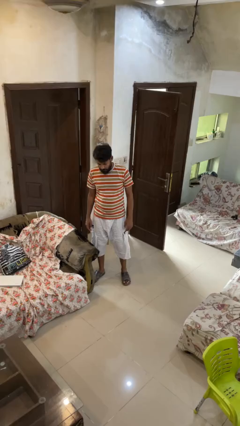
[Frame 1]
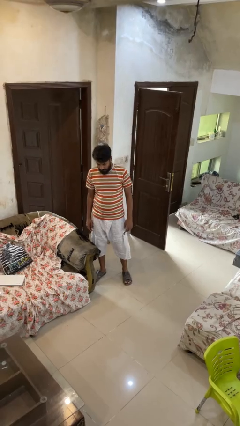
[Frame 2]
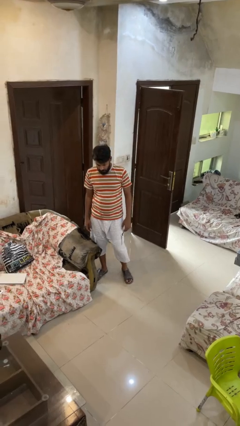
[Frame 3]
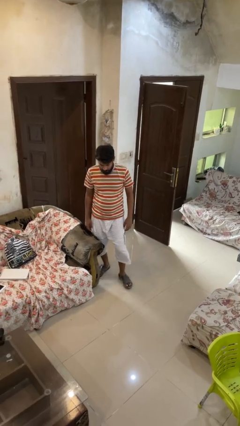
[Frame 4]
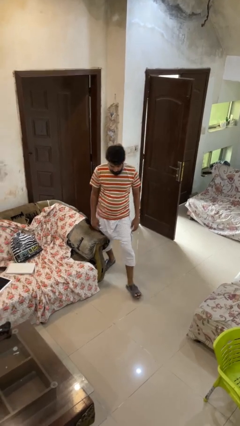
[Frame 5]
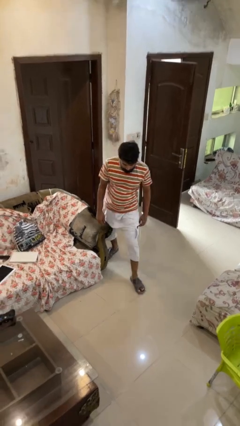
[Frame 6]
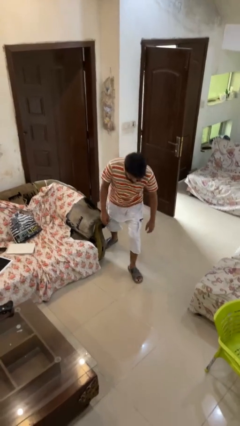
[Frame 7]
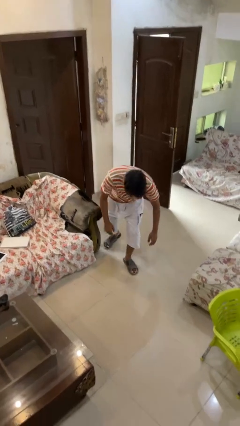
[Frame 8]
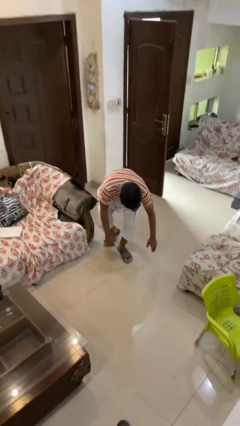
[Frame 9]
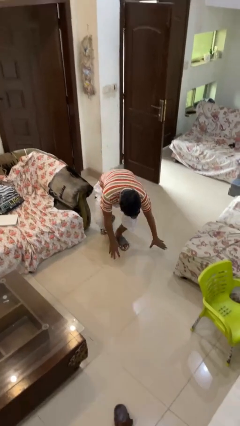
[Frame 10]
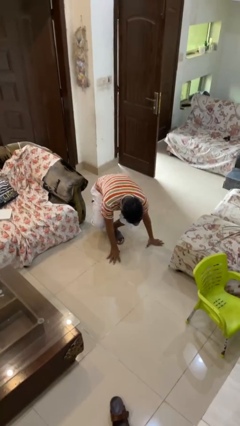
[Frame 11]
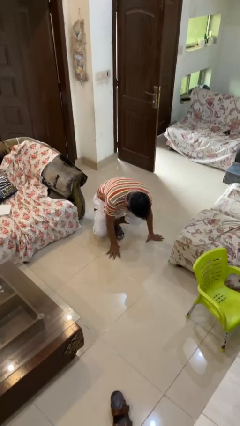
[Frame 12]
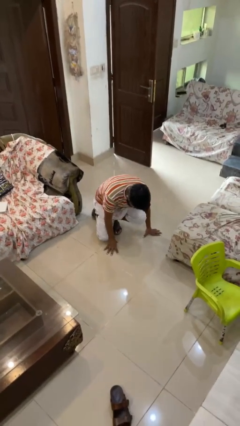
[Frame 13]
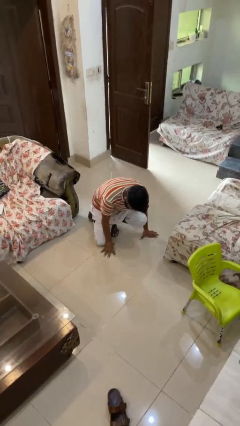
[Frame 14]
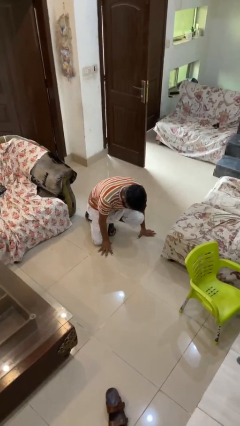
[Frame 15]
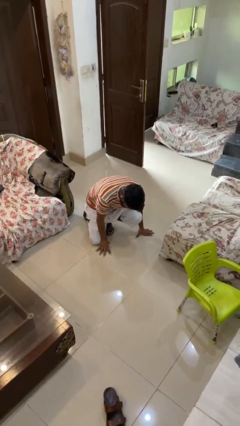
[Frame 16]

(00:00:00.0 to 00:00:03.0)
person trips on object on floor

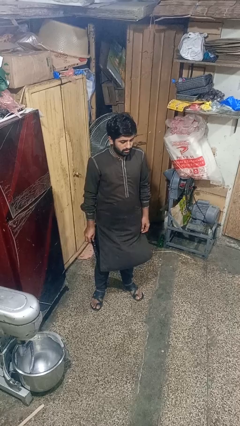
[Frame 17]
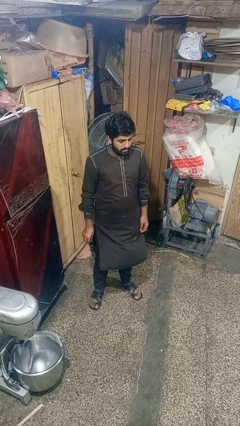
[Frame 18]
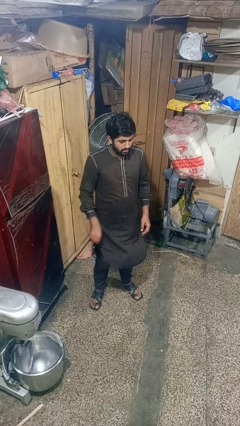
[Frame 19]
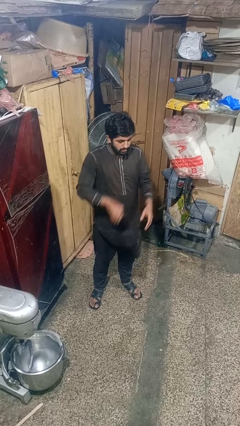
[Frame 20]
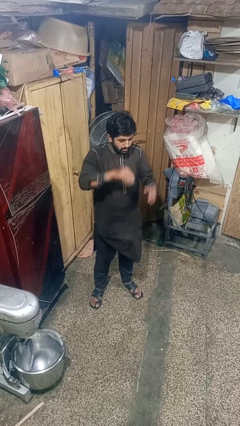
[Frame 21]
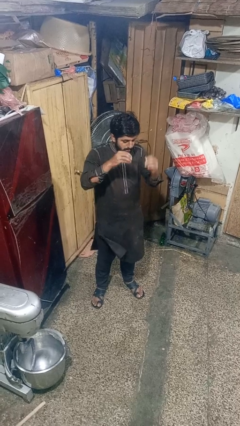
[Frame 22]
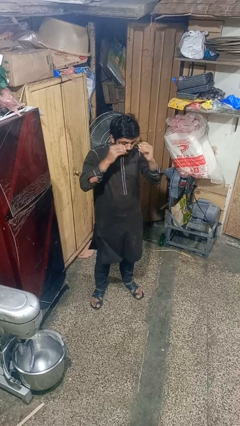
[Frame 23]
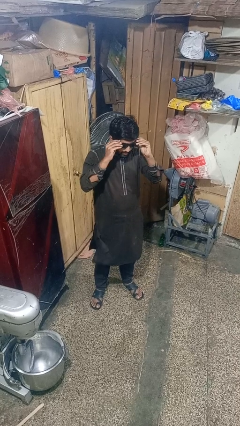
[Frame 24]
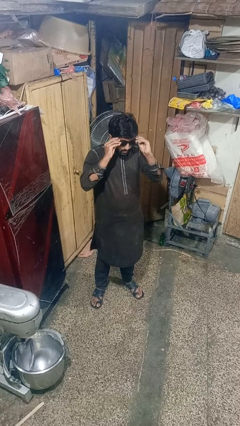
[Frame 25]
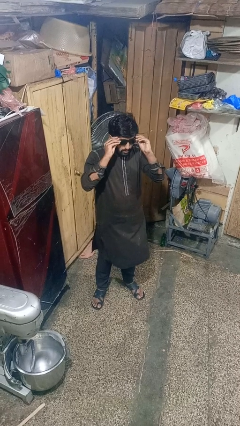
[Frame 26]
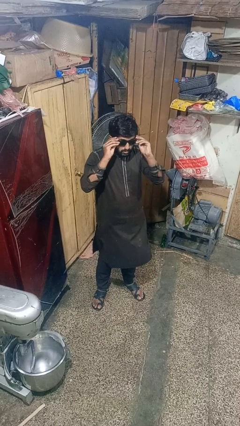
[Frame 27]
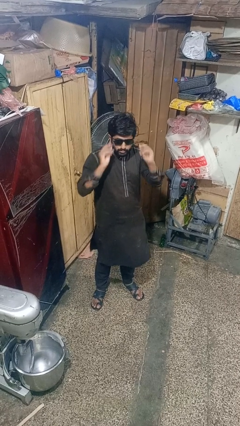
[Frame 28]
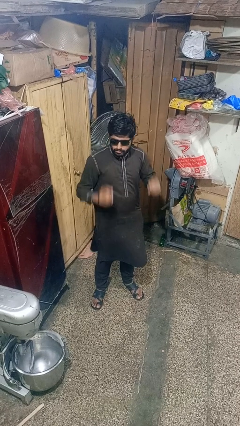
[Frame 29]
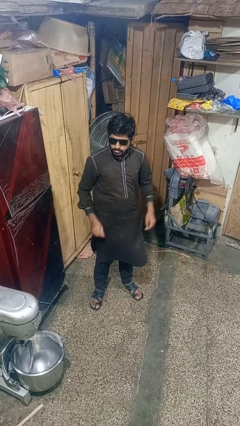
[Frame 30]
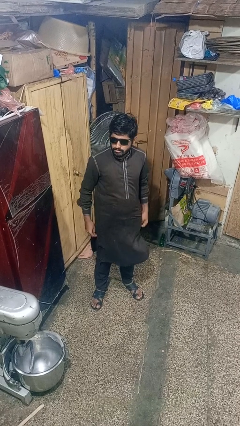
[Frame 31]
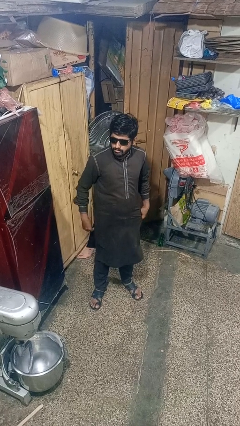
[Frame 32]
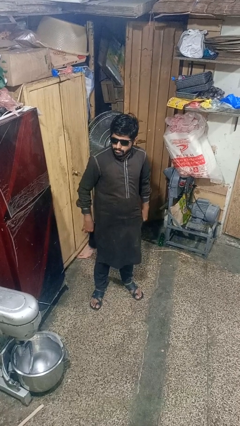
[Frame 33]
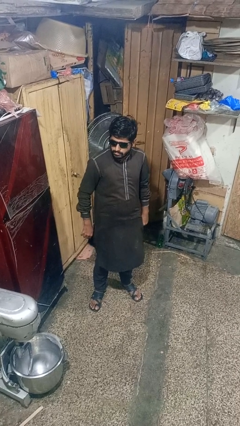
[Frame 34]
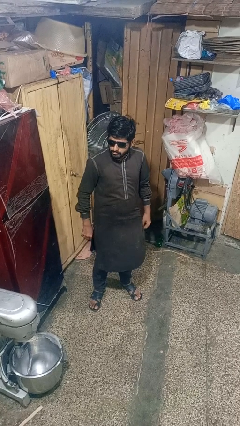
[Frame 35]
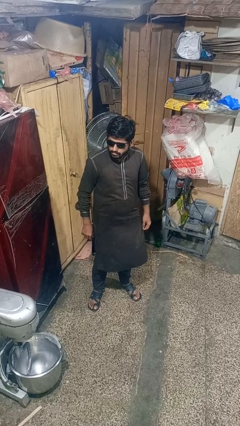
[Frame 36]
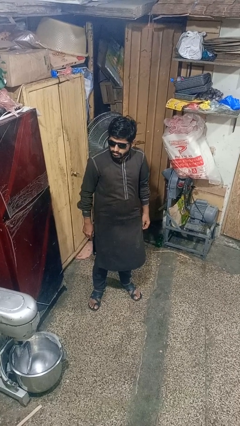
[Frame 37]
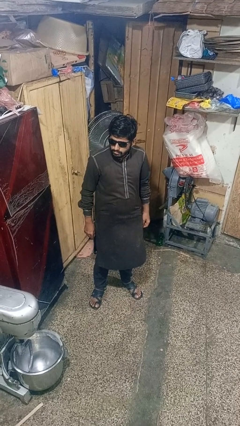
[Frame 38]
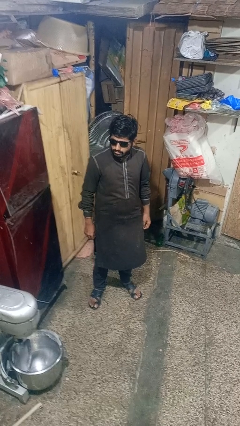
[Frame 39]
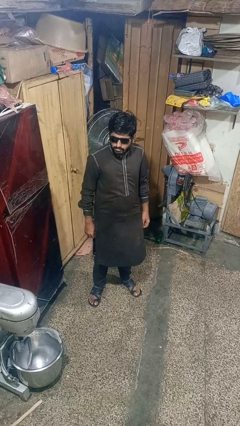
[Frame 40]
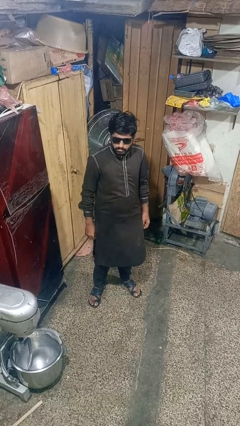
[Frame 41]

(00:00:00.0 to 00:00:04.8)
person puts on sunglasses

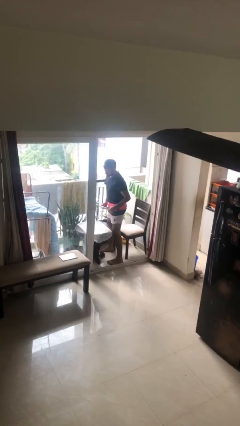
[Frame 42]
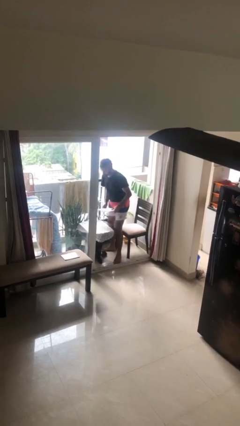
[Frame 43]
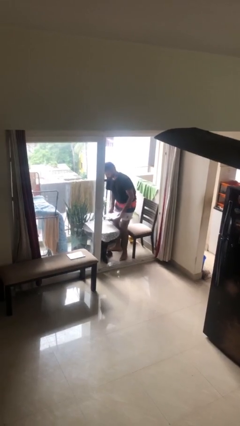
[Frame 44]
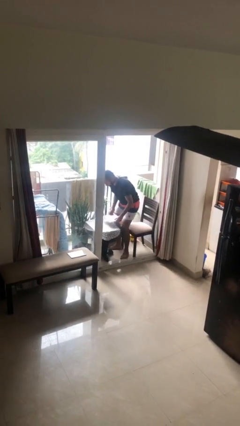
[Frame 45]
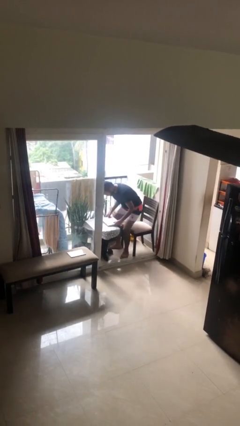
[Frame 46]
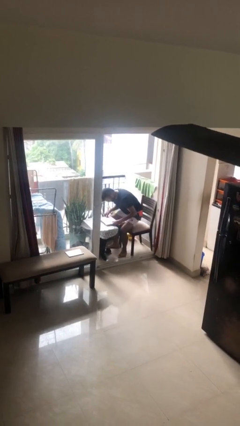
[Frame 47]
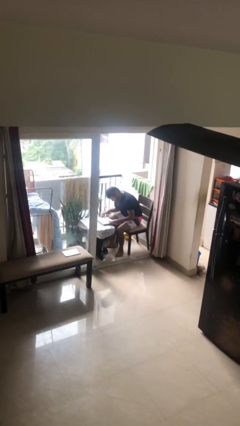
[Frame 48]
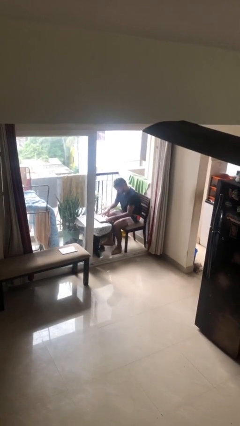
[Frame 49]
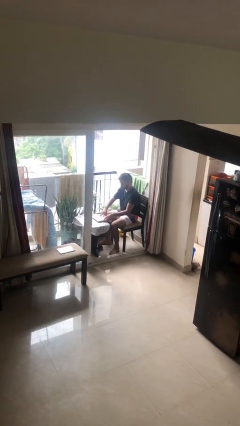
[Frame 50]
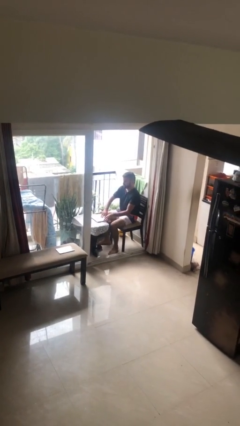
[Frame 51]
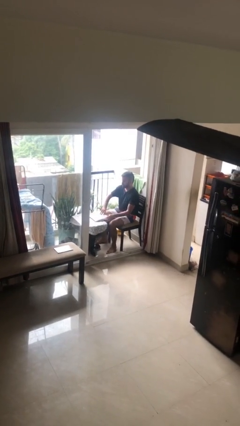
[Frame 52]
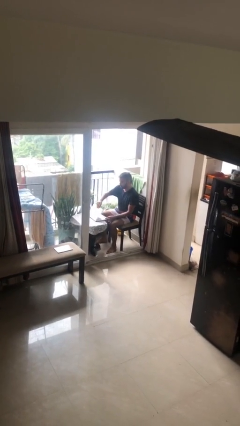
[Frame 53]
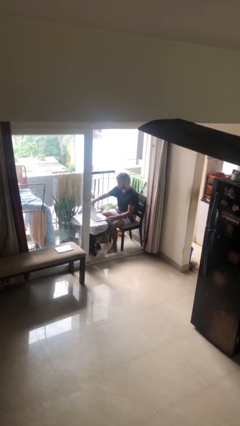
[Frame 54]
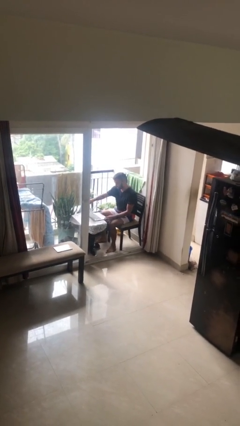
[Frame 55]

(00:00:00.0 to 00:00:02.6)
person sits down

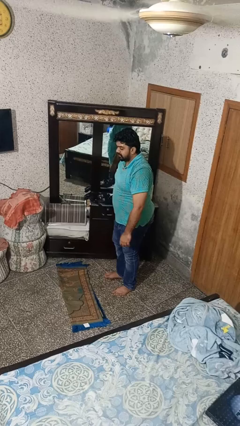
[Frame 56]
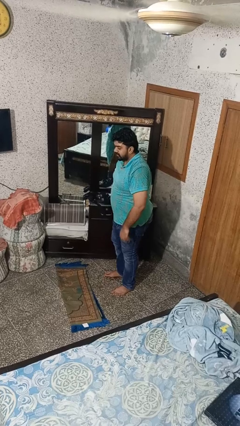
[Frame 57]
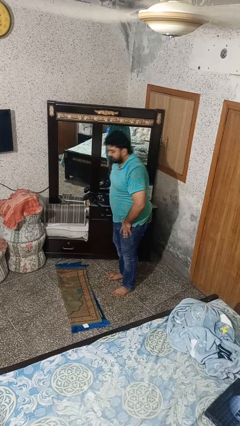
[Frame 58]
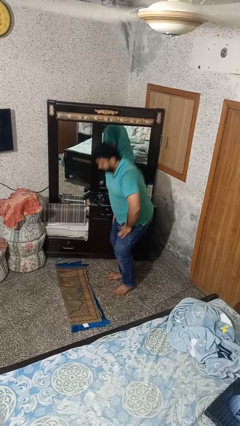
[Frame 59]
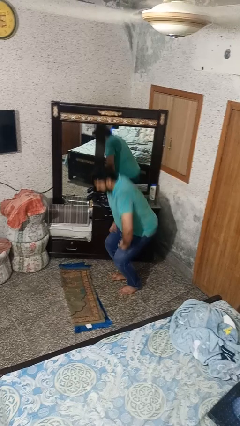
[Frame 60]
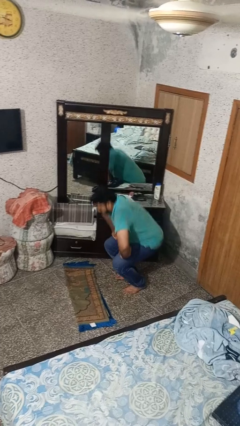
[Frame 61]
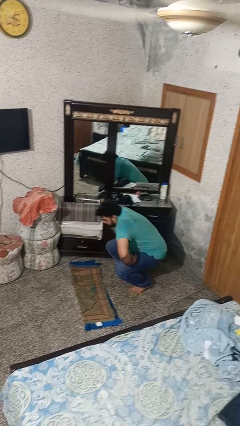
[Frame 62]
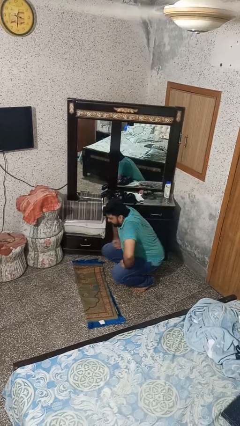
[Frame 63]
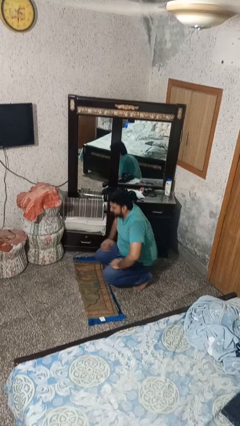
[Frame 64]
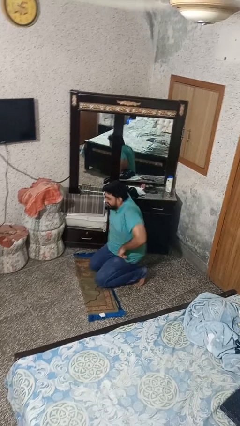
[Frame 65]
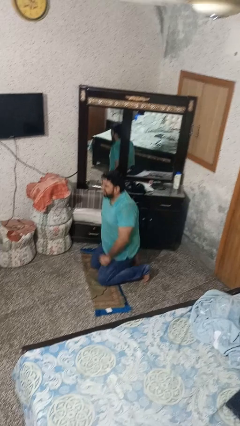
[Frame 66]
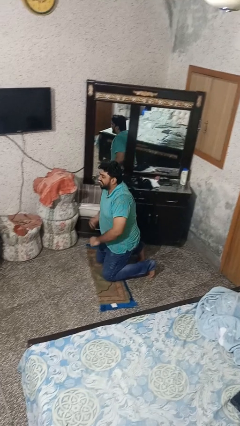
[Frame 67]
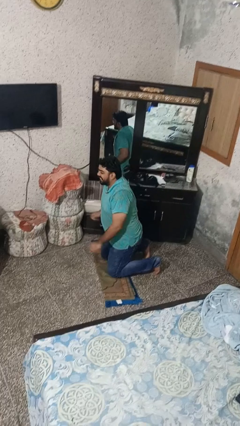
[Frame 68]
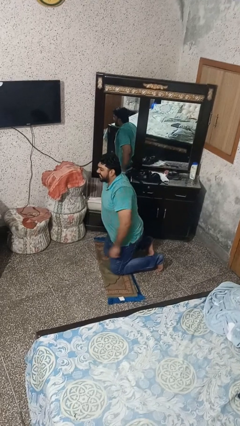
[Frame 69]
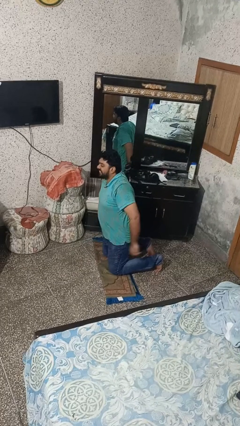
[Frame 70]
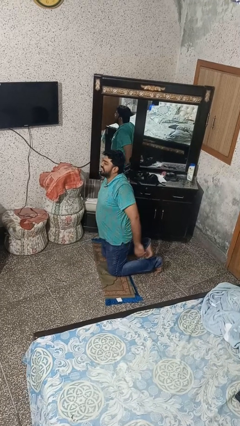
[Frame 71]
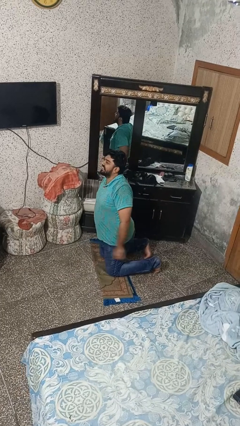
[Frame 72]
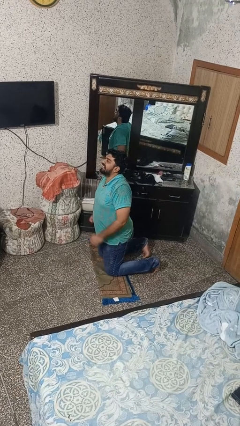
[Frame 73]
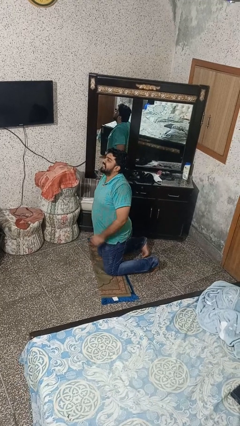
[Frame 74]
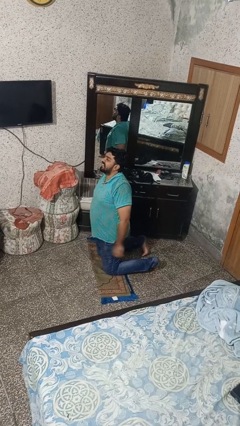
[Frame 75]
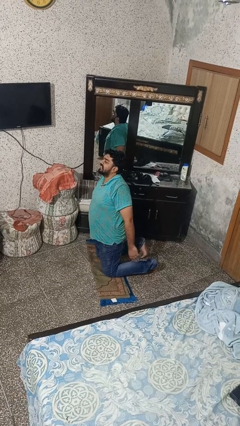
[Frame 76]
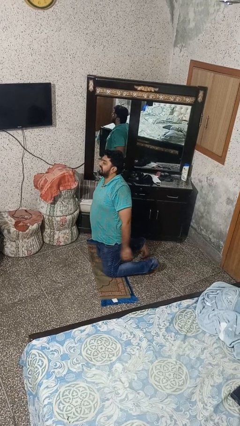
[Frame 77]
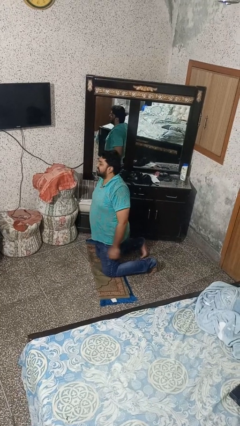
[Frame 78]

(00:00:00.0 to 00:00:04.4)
person kneels

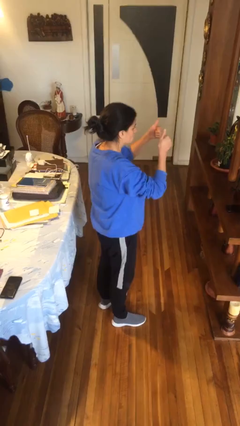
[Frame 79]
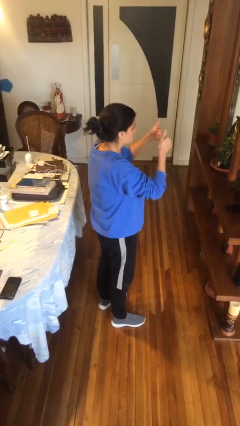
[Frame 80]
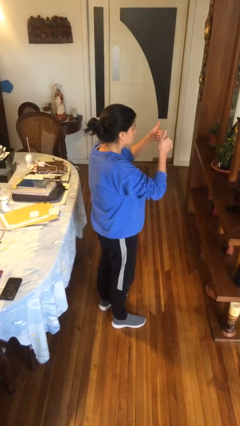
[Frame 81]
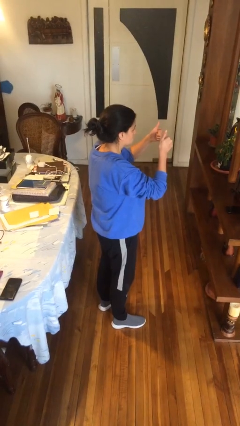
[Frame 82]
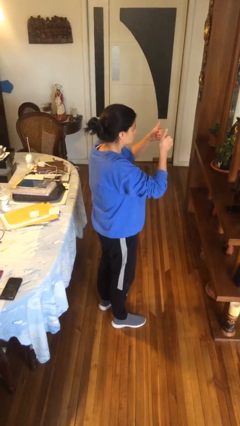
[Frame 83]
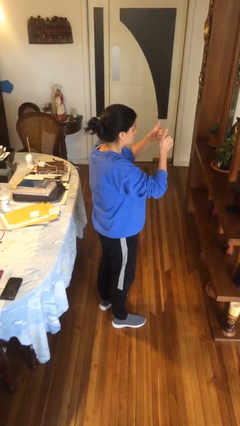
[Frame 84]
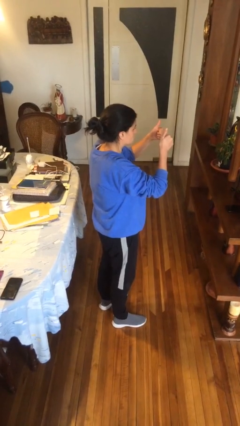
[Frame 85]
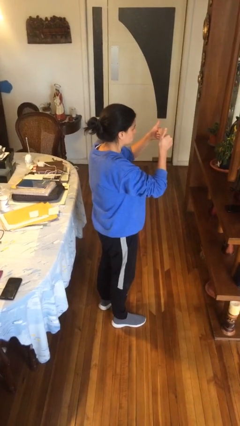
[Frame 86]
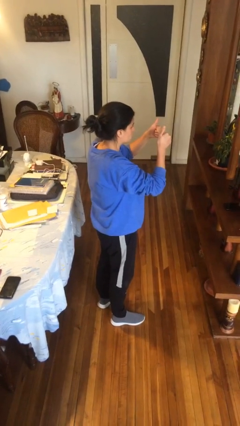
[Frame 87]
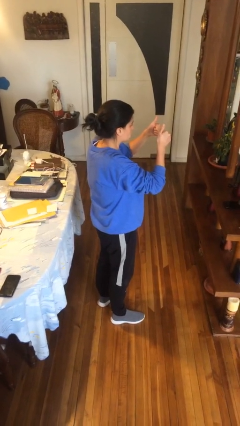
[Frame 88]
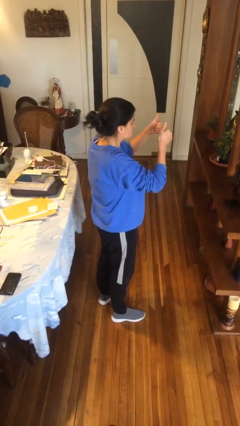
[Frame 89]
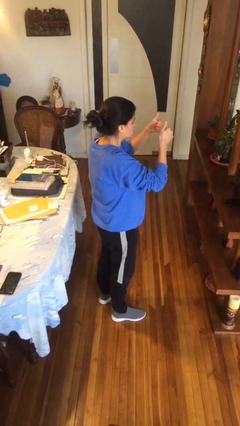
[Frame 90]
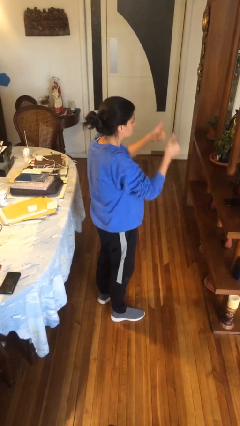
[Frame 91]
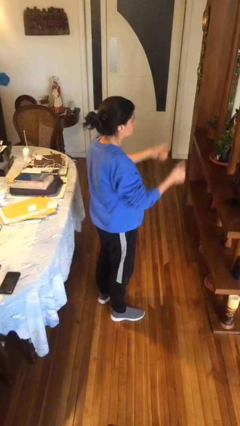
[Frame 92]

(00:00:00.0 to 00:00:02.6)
person gestures thumbs up

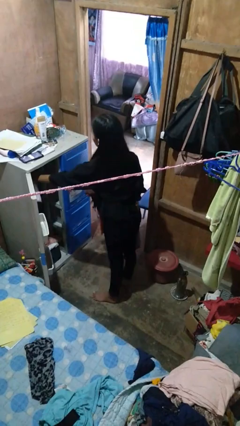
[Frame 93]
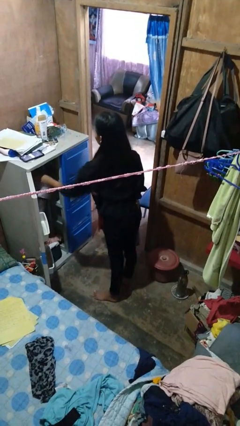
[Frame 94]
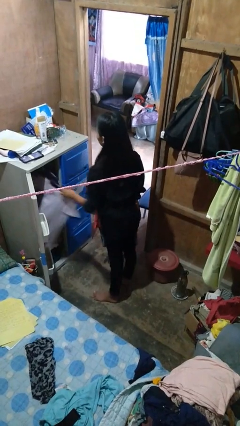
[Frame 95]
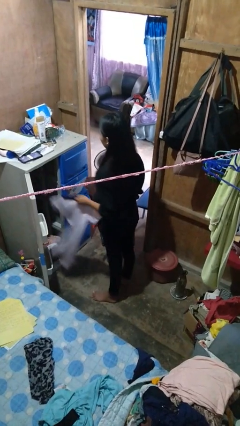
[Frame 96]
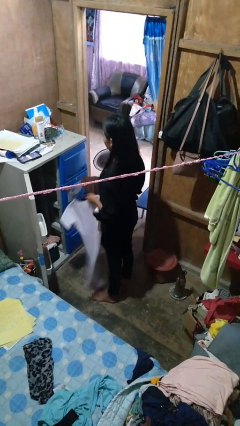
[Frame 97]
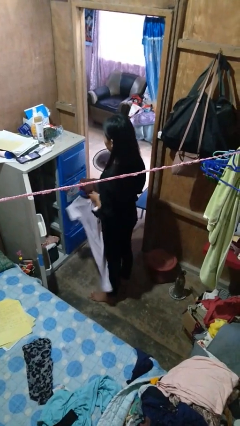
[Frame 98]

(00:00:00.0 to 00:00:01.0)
person takes clothes from closet